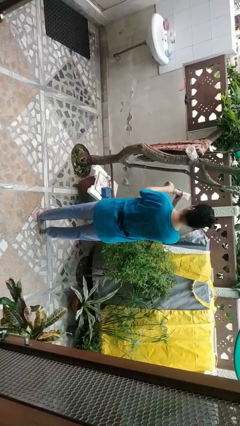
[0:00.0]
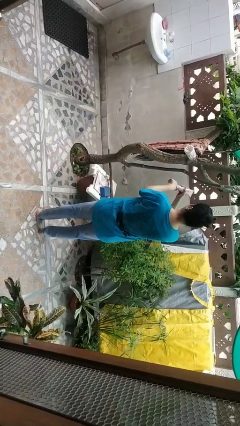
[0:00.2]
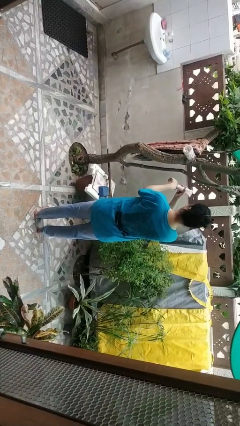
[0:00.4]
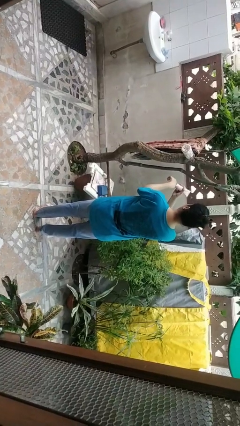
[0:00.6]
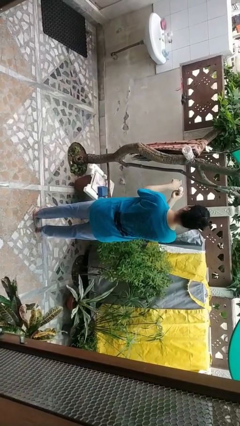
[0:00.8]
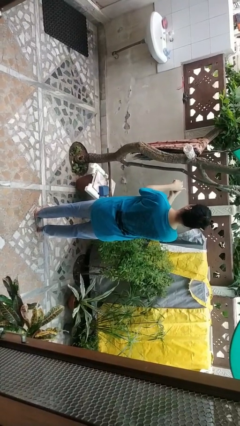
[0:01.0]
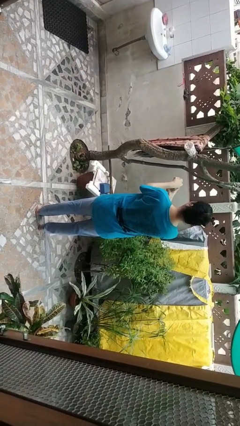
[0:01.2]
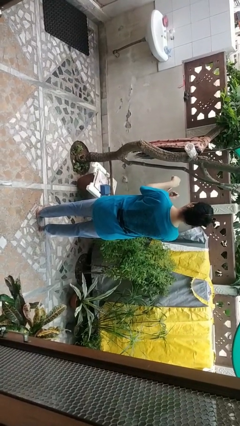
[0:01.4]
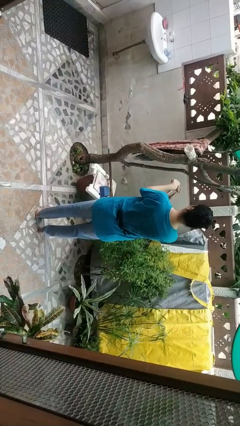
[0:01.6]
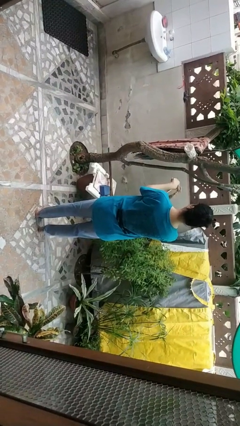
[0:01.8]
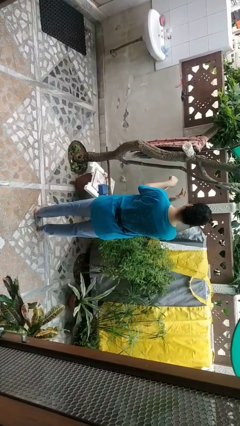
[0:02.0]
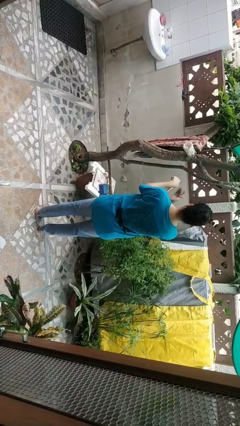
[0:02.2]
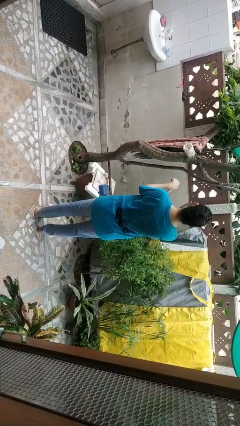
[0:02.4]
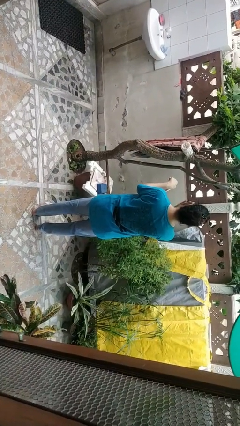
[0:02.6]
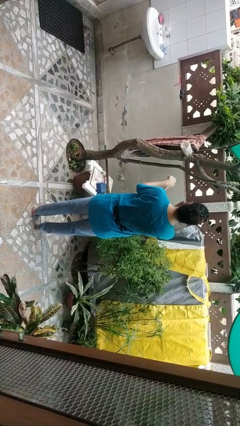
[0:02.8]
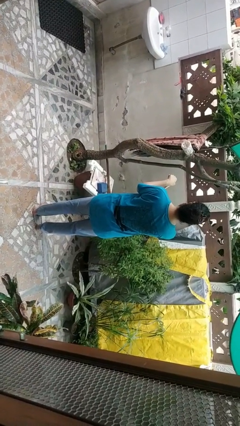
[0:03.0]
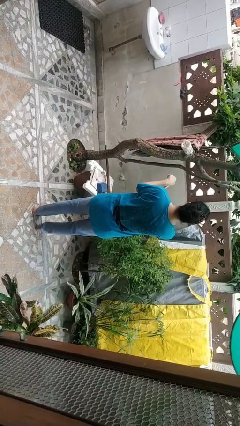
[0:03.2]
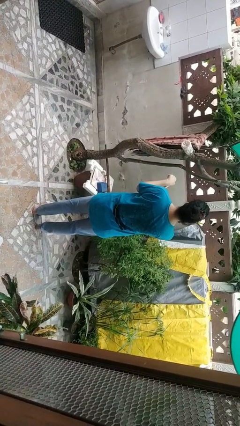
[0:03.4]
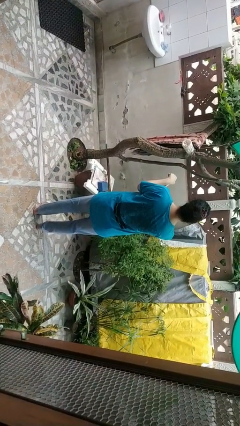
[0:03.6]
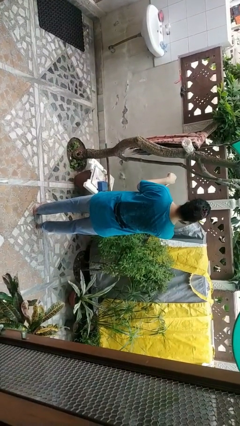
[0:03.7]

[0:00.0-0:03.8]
person applies facial moisturizer

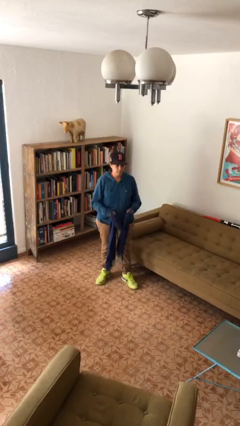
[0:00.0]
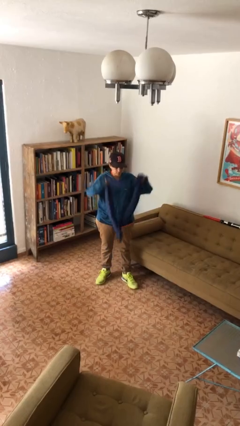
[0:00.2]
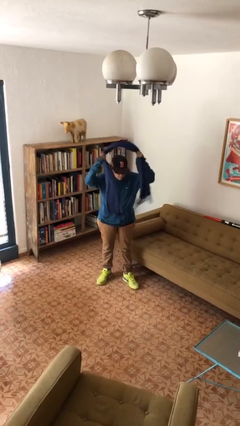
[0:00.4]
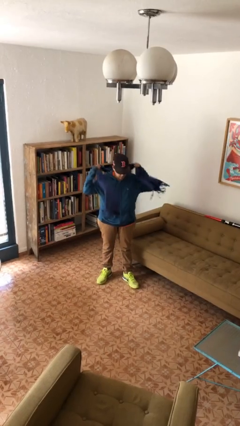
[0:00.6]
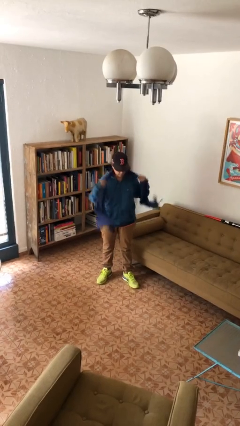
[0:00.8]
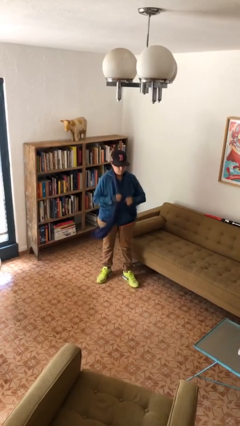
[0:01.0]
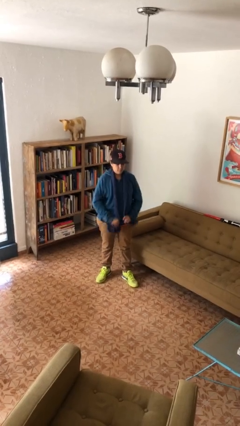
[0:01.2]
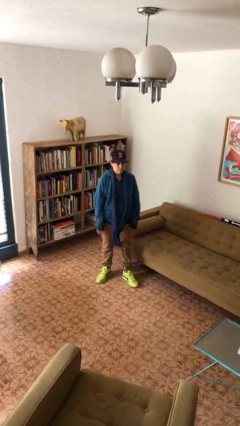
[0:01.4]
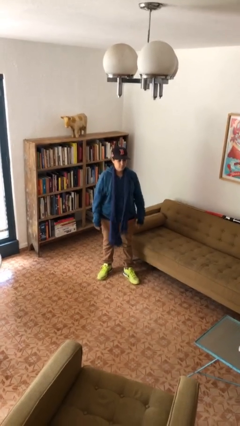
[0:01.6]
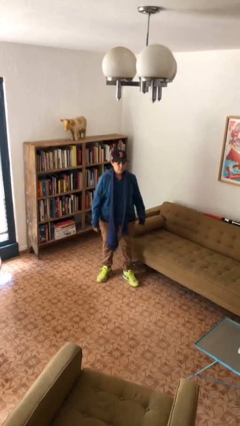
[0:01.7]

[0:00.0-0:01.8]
person puts on scarf

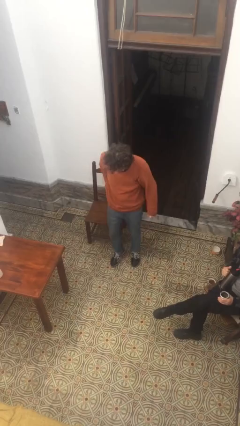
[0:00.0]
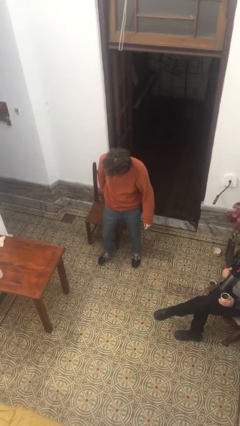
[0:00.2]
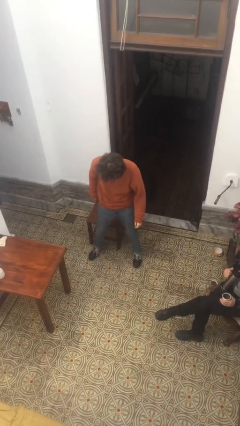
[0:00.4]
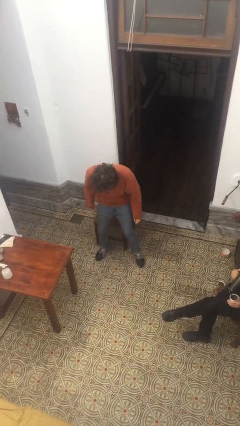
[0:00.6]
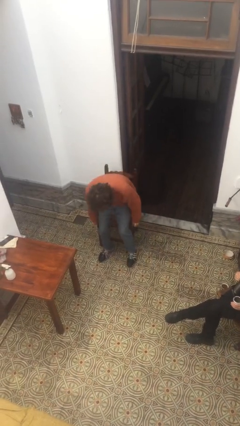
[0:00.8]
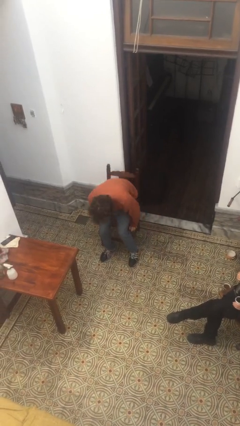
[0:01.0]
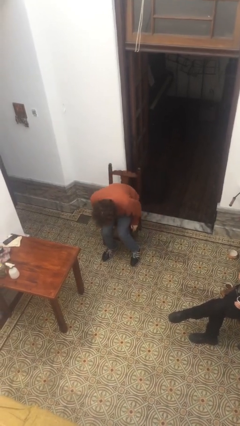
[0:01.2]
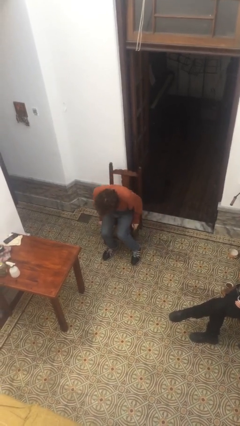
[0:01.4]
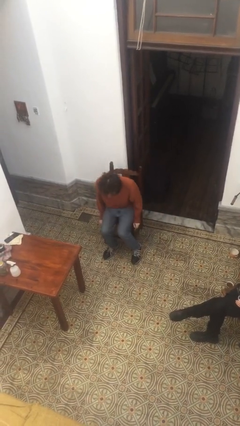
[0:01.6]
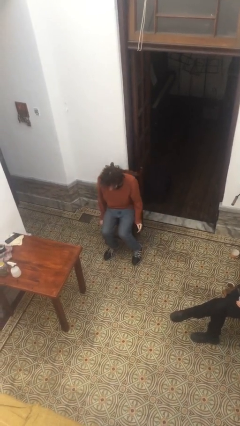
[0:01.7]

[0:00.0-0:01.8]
person sits down

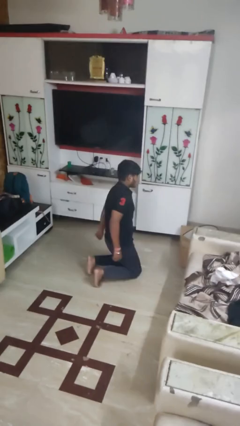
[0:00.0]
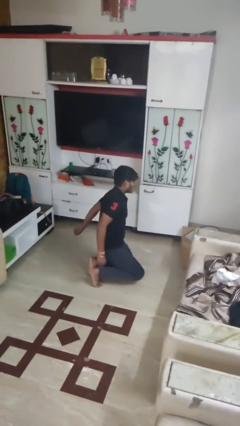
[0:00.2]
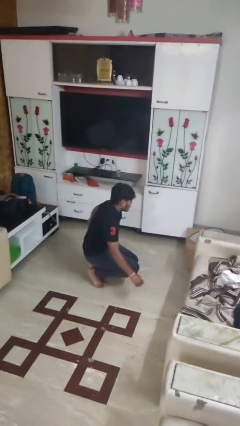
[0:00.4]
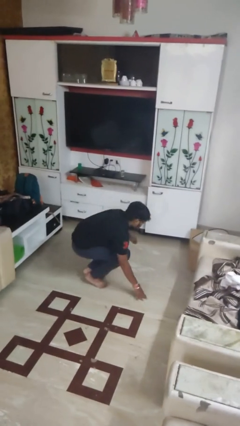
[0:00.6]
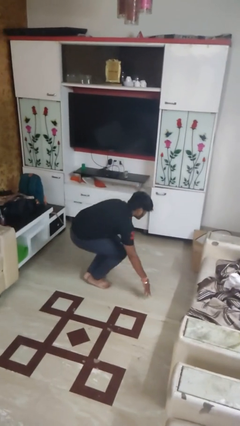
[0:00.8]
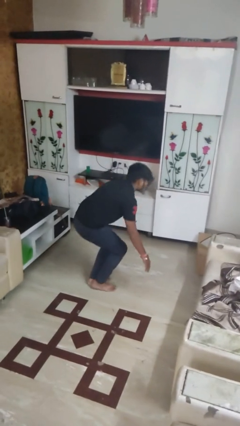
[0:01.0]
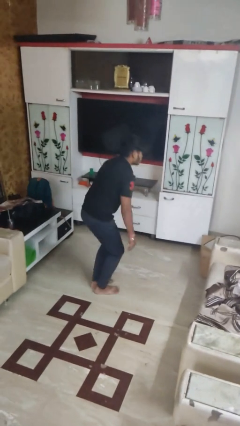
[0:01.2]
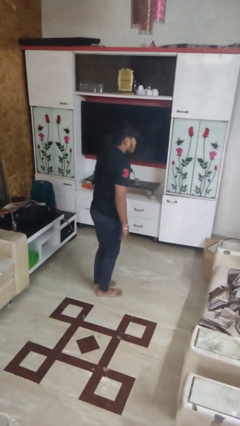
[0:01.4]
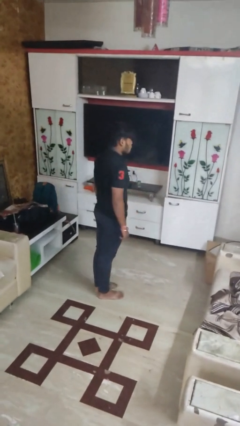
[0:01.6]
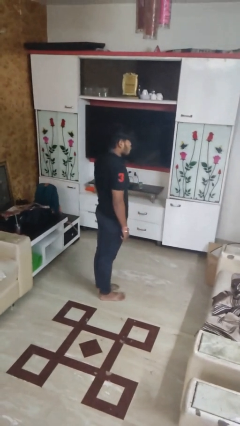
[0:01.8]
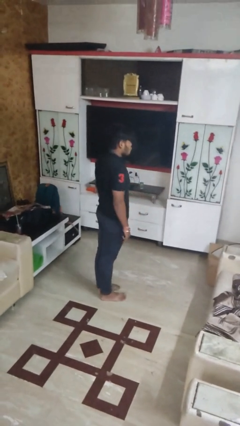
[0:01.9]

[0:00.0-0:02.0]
person stands up from floor

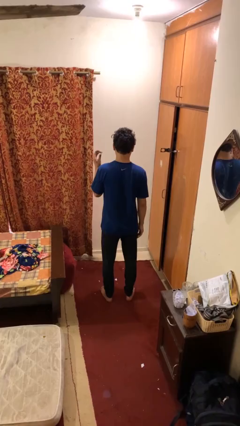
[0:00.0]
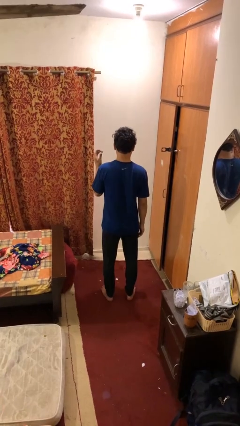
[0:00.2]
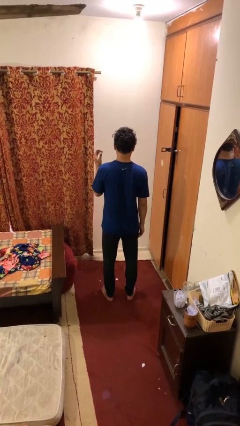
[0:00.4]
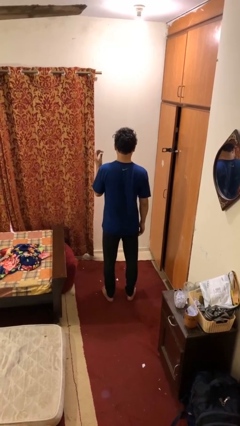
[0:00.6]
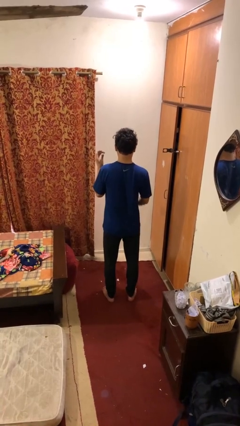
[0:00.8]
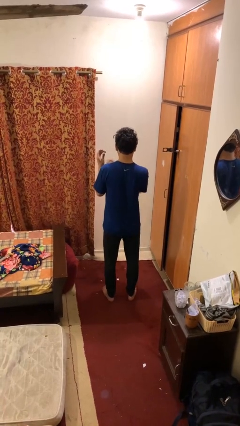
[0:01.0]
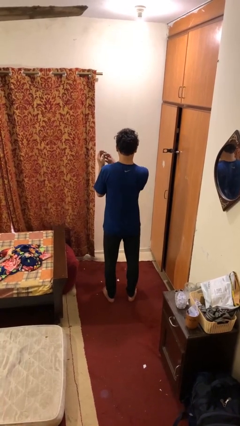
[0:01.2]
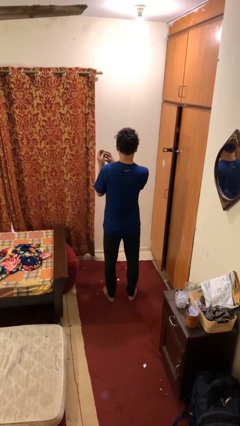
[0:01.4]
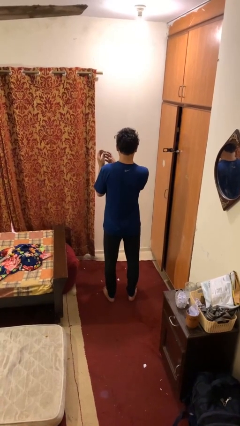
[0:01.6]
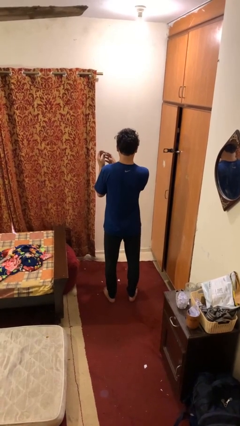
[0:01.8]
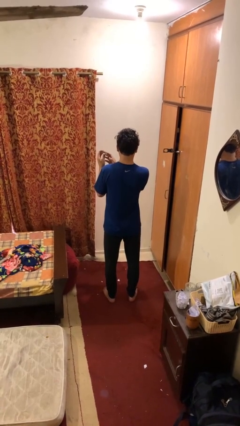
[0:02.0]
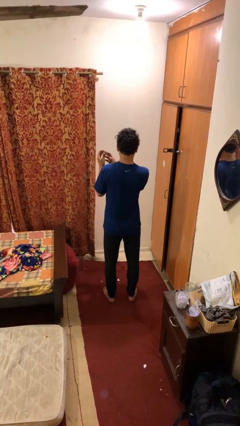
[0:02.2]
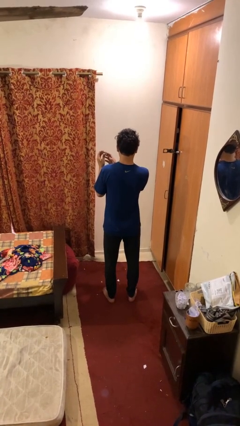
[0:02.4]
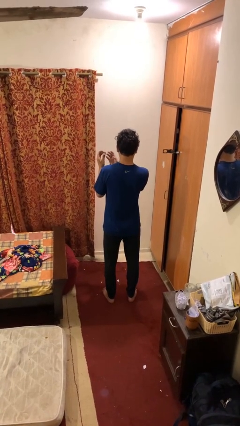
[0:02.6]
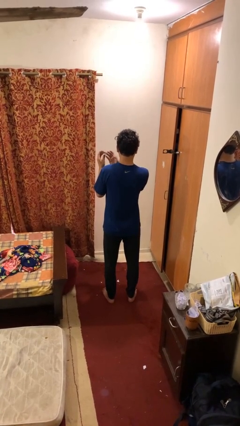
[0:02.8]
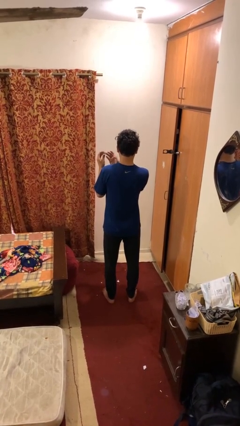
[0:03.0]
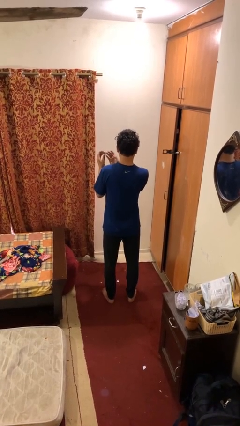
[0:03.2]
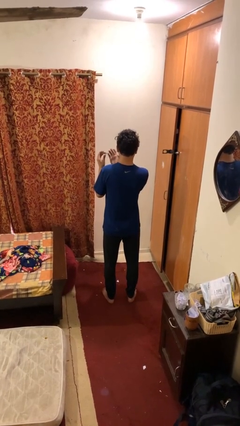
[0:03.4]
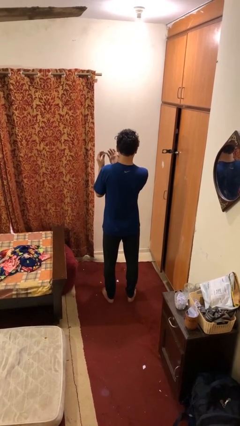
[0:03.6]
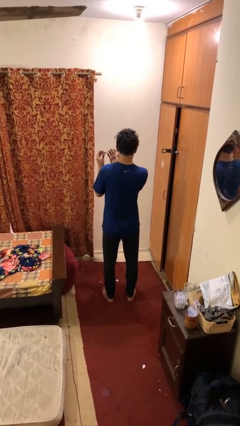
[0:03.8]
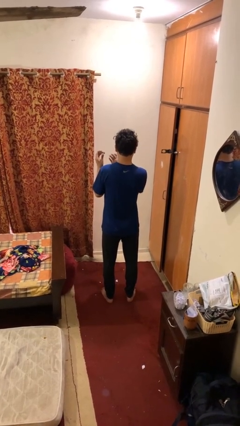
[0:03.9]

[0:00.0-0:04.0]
person clips fingernails

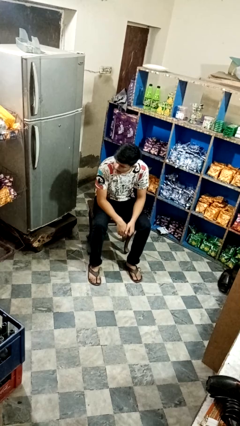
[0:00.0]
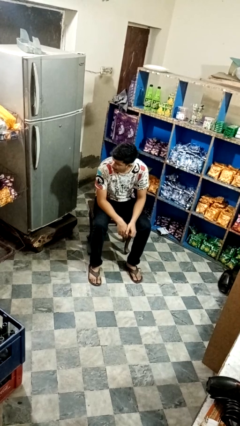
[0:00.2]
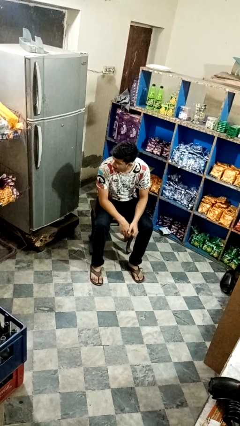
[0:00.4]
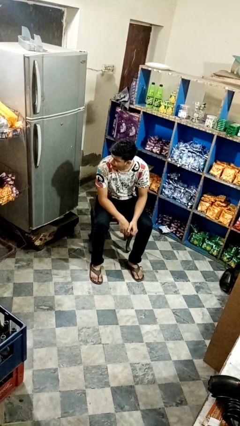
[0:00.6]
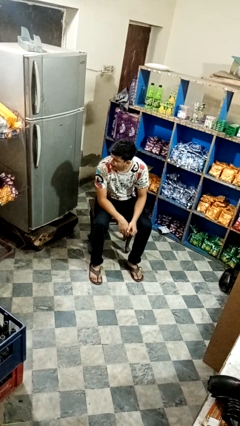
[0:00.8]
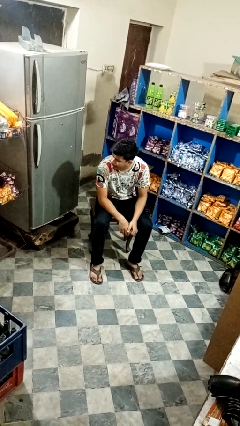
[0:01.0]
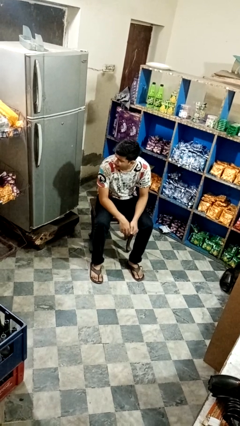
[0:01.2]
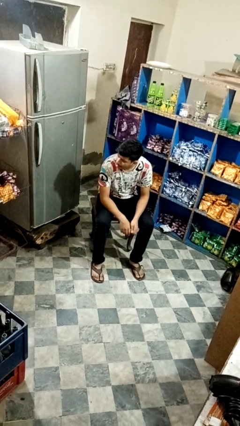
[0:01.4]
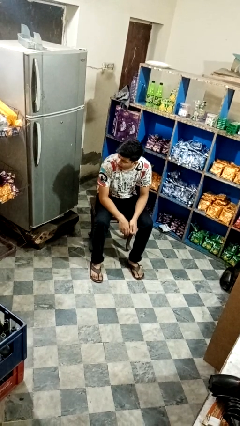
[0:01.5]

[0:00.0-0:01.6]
person sticks out tongue

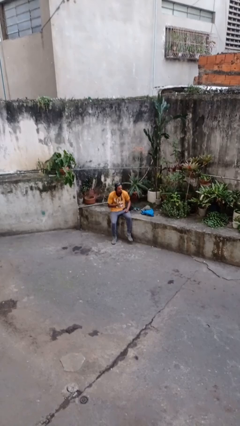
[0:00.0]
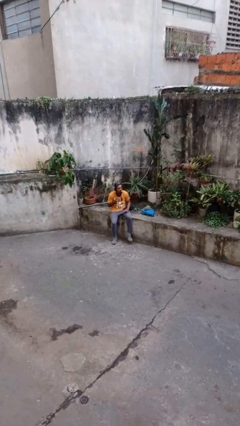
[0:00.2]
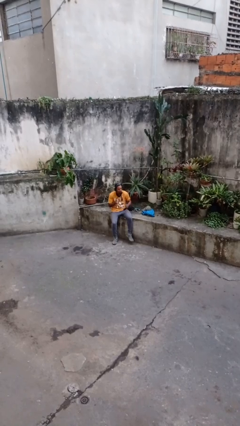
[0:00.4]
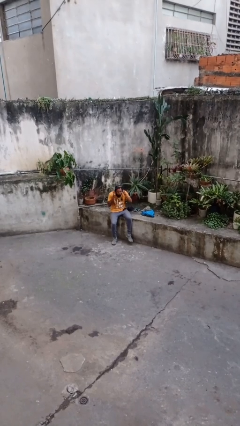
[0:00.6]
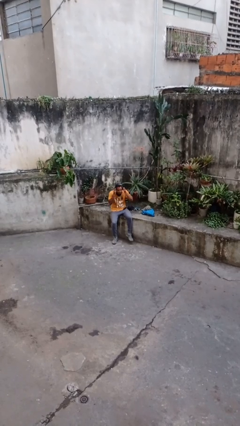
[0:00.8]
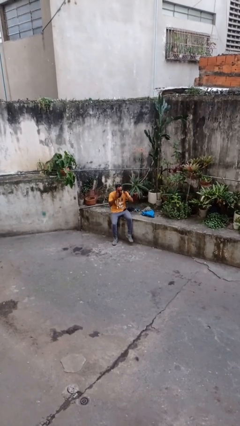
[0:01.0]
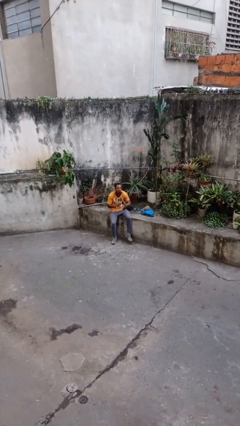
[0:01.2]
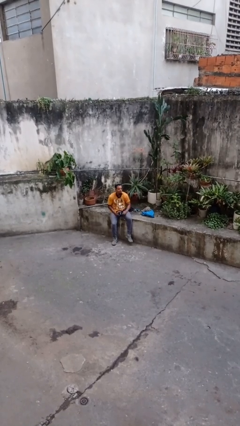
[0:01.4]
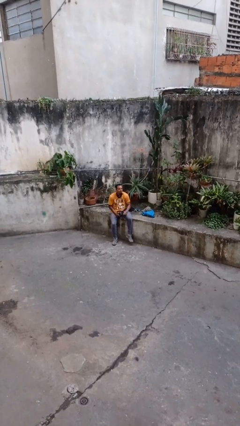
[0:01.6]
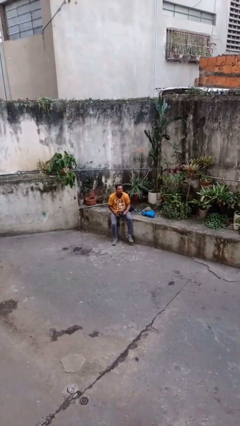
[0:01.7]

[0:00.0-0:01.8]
person takes off headphones

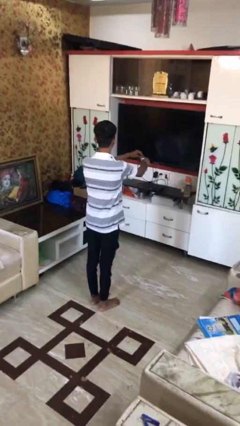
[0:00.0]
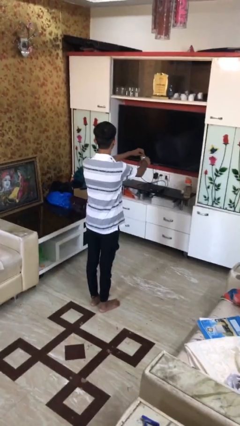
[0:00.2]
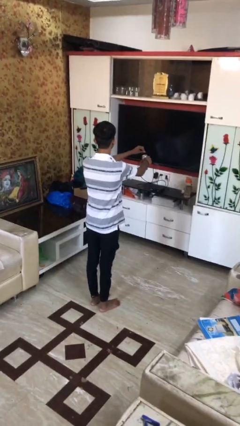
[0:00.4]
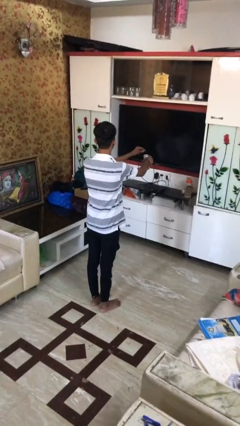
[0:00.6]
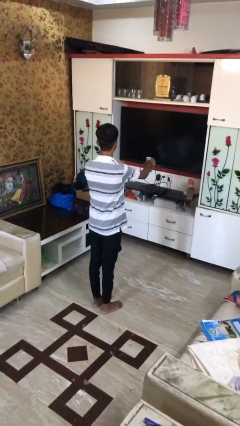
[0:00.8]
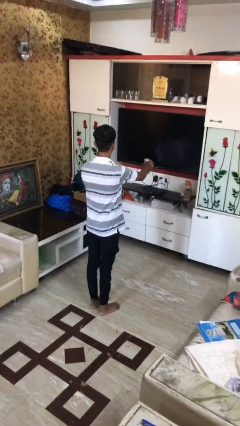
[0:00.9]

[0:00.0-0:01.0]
person opens beverage can
